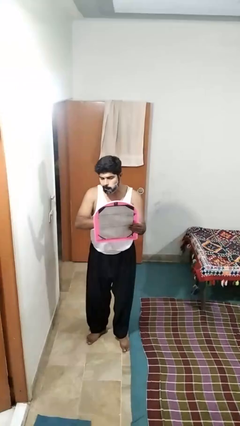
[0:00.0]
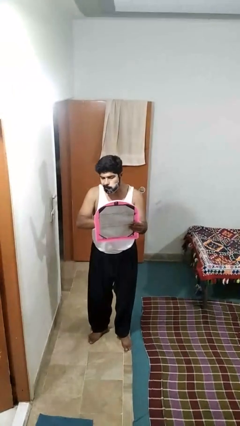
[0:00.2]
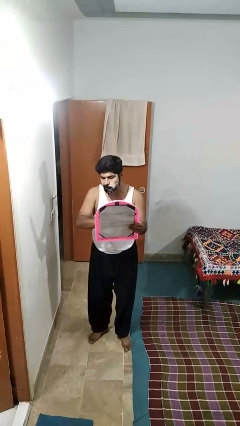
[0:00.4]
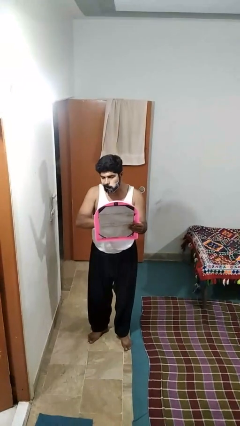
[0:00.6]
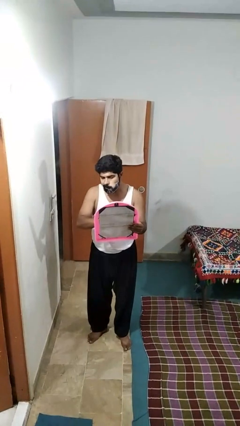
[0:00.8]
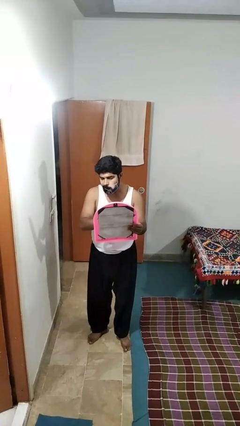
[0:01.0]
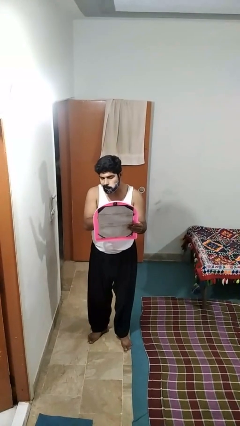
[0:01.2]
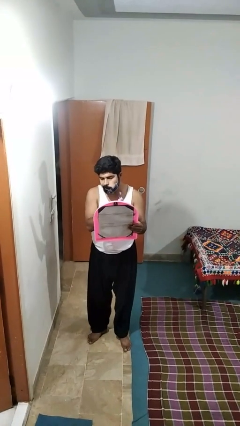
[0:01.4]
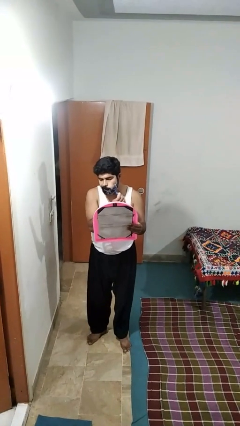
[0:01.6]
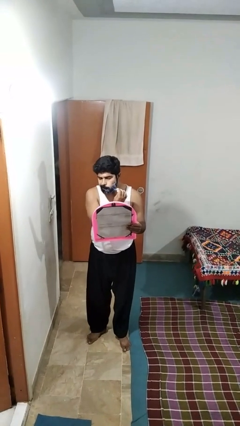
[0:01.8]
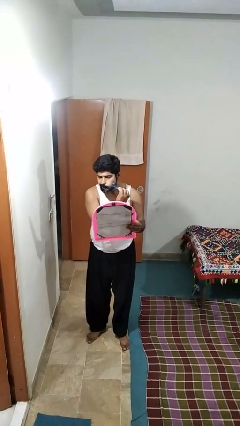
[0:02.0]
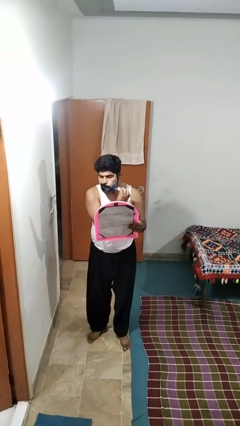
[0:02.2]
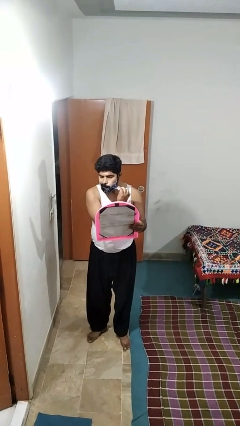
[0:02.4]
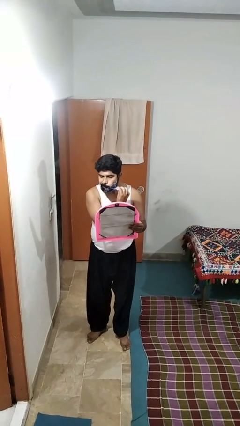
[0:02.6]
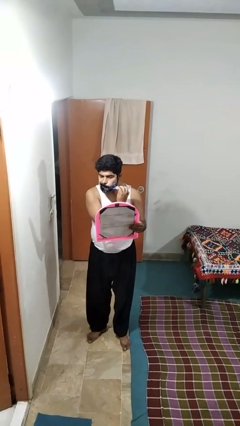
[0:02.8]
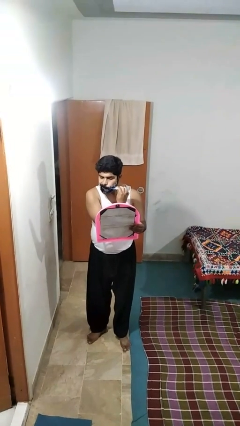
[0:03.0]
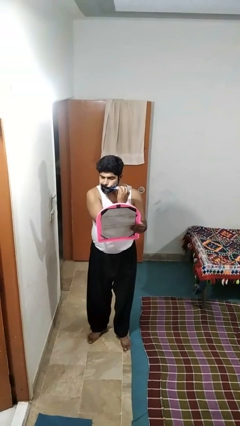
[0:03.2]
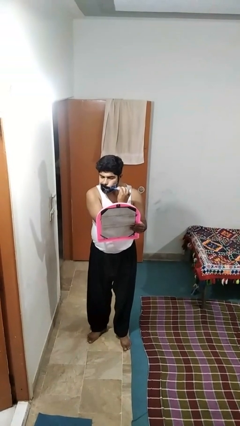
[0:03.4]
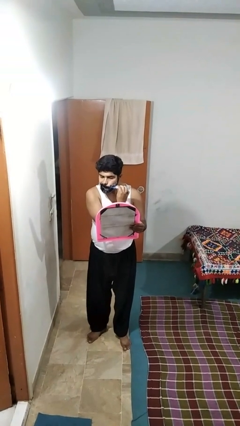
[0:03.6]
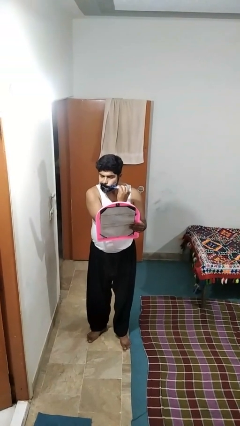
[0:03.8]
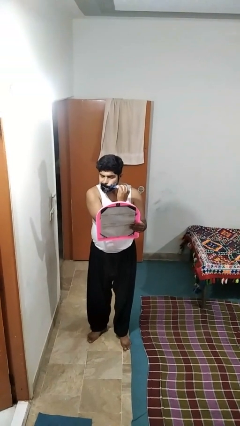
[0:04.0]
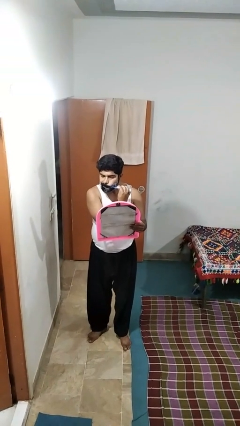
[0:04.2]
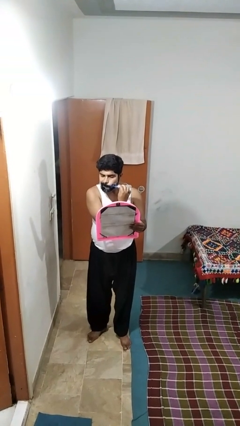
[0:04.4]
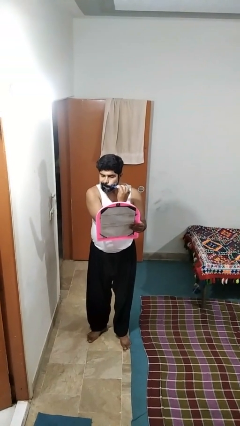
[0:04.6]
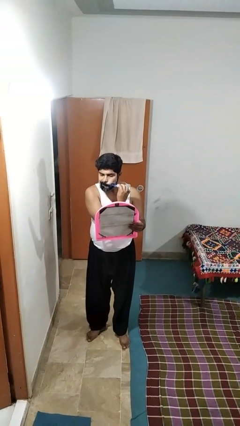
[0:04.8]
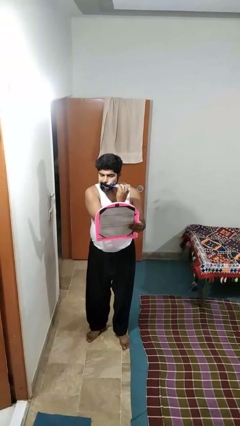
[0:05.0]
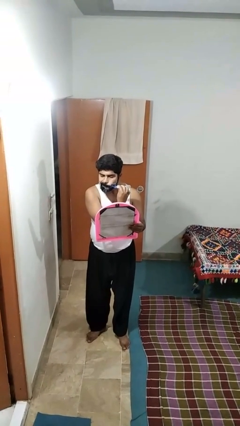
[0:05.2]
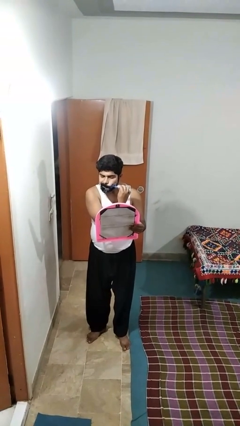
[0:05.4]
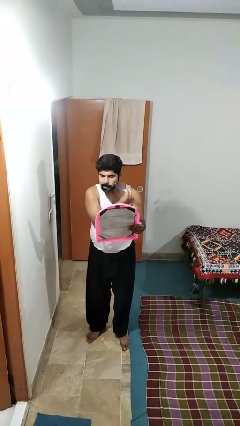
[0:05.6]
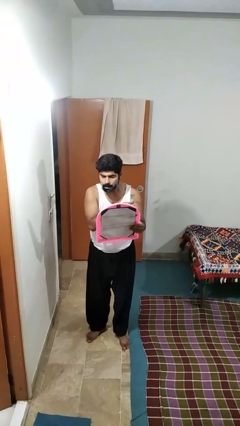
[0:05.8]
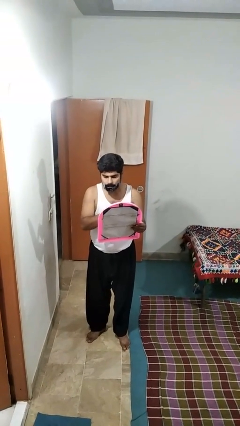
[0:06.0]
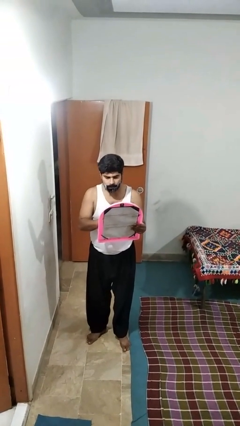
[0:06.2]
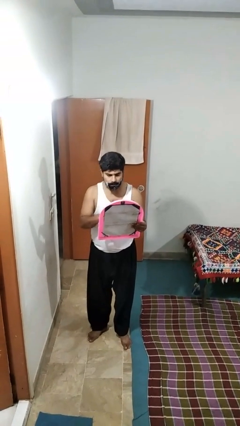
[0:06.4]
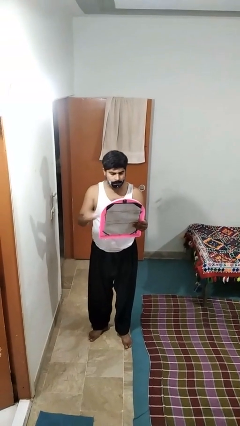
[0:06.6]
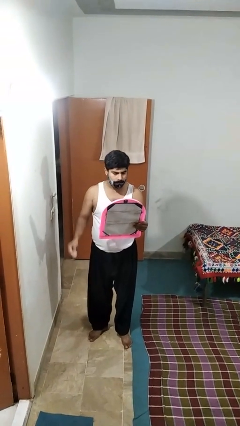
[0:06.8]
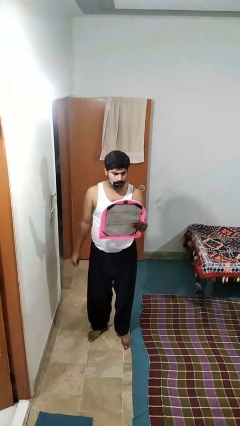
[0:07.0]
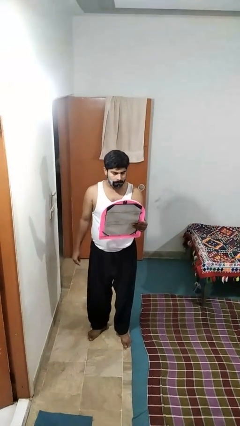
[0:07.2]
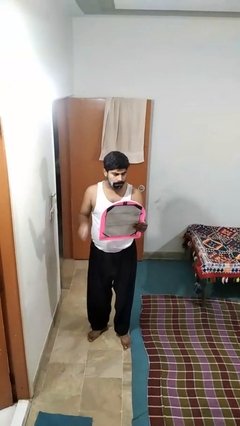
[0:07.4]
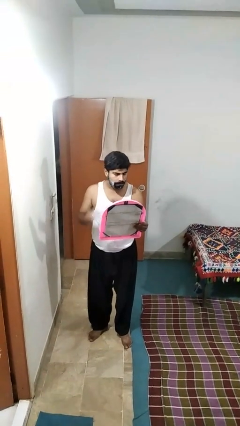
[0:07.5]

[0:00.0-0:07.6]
person shaves face

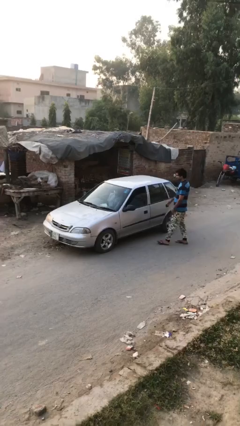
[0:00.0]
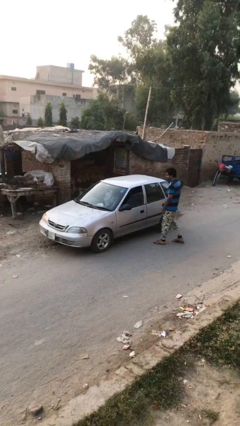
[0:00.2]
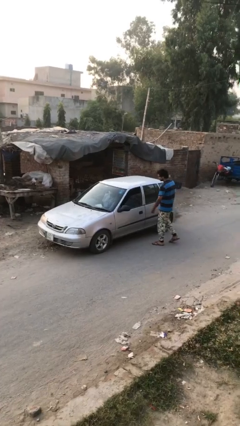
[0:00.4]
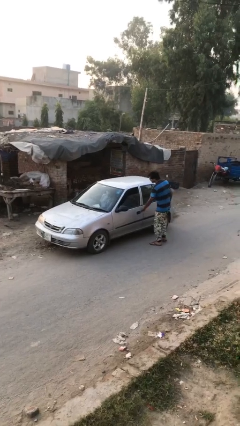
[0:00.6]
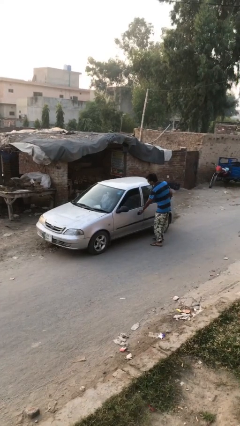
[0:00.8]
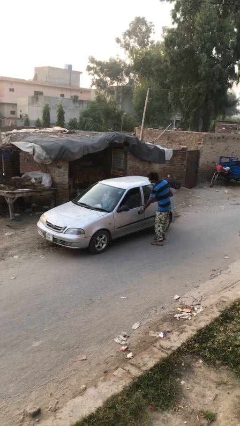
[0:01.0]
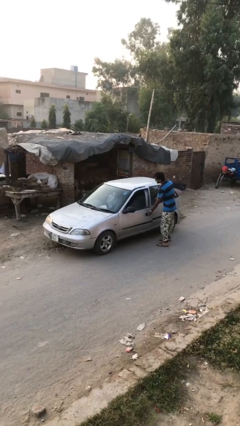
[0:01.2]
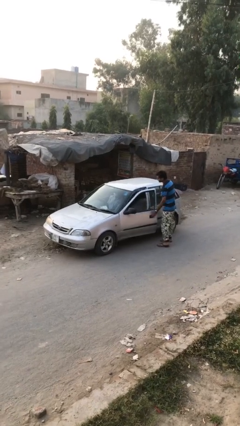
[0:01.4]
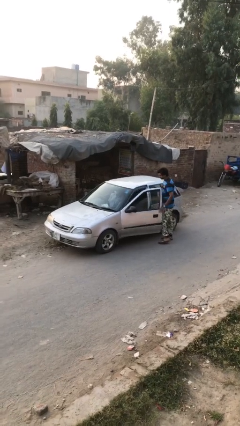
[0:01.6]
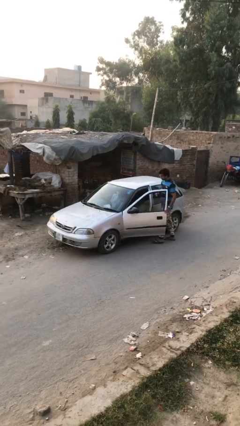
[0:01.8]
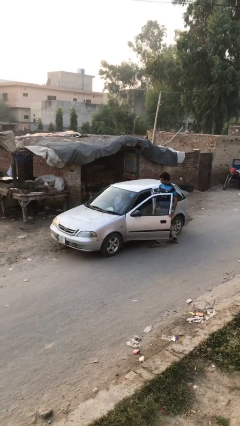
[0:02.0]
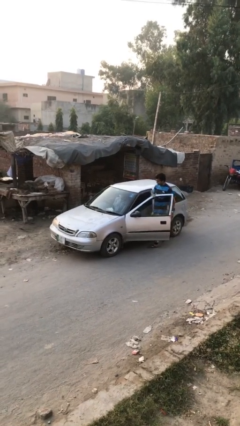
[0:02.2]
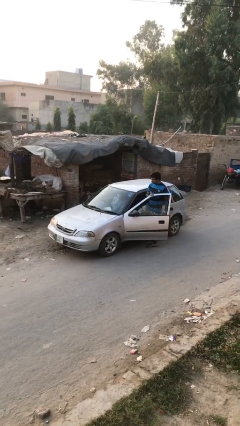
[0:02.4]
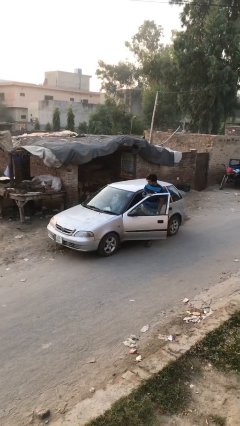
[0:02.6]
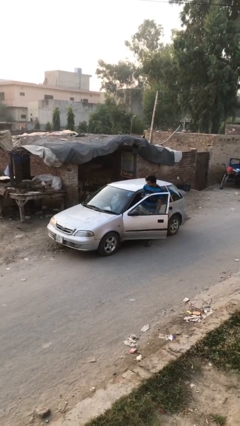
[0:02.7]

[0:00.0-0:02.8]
car picks up person

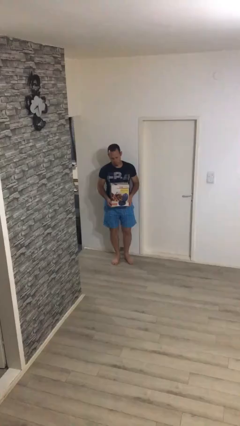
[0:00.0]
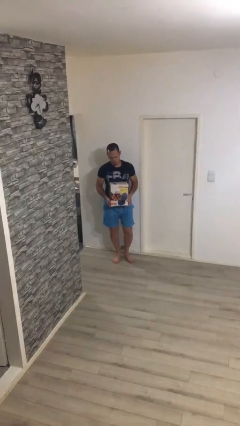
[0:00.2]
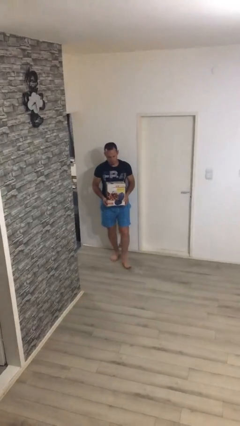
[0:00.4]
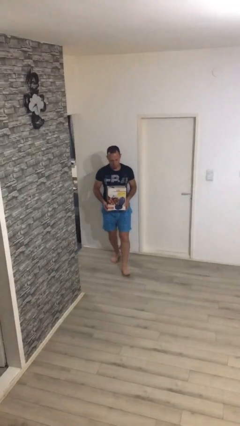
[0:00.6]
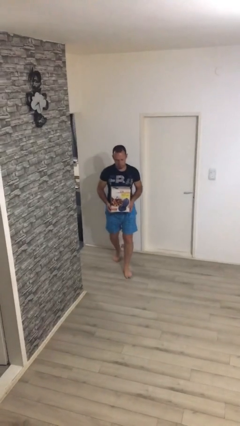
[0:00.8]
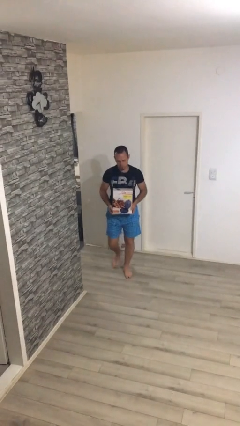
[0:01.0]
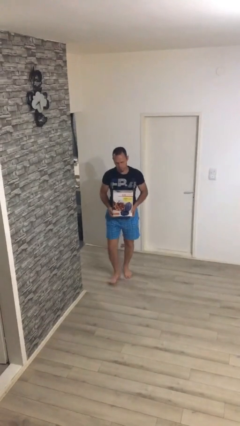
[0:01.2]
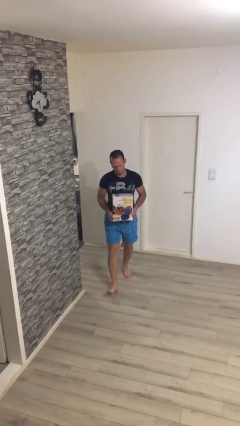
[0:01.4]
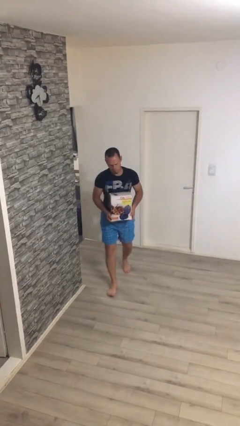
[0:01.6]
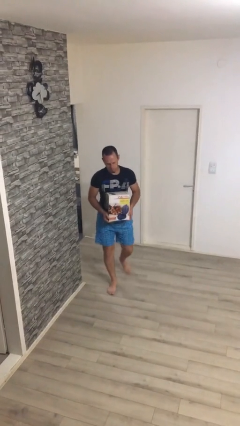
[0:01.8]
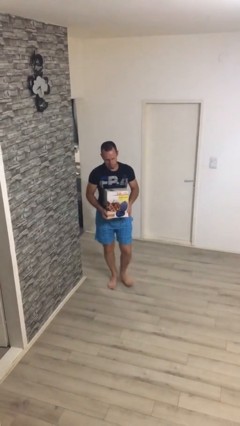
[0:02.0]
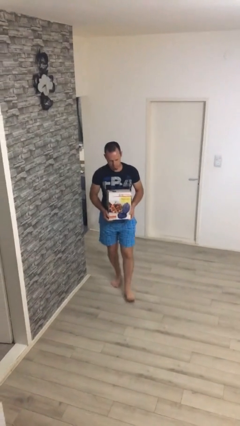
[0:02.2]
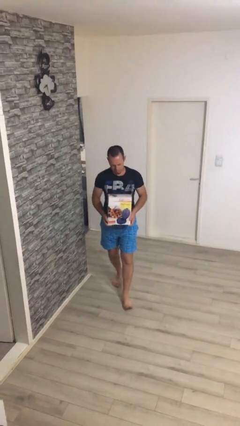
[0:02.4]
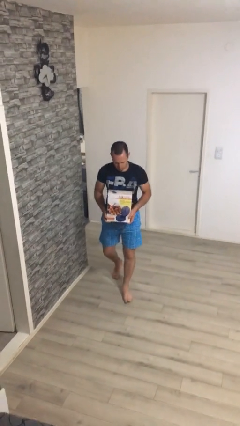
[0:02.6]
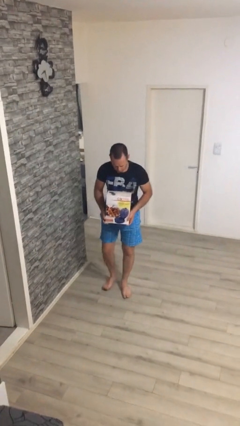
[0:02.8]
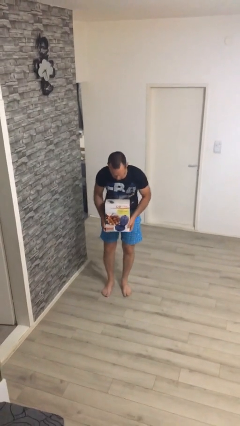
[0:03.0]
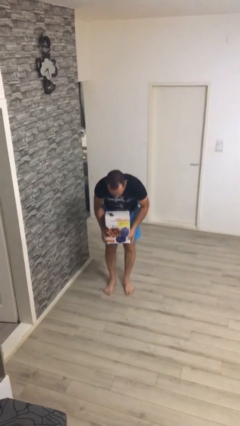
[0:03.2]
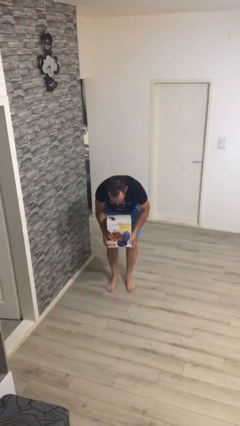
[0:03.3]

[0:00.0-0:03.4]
person carries heavy object

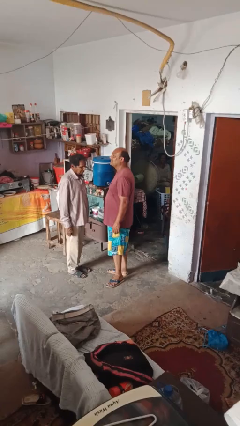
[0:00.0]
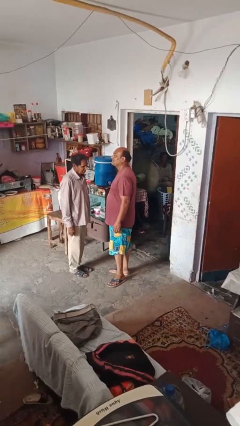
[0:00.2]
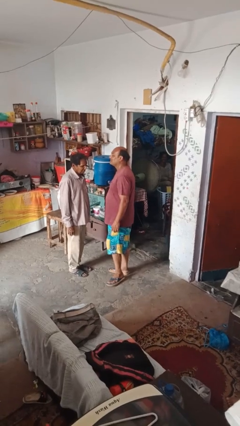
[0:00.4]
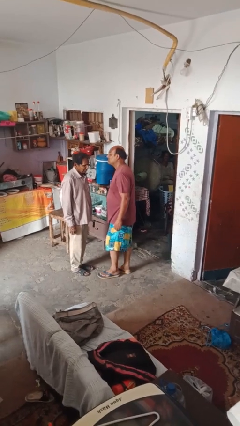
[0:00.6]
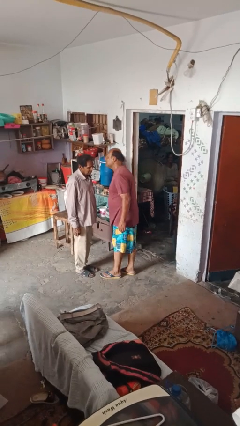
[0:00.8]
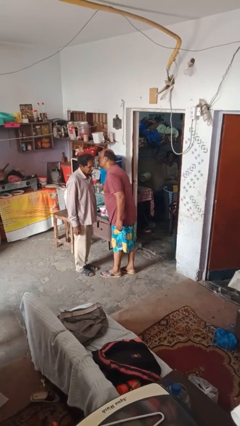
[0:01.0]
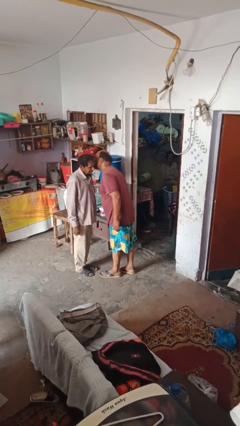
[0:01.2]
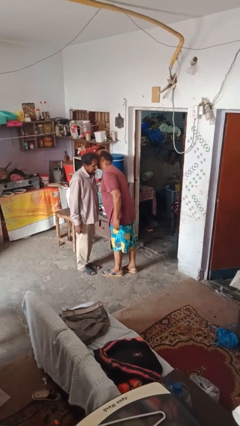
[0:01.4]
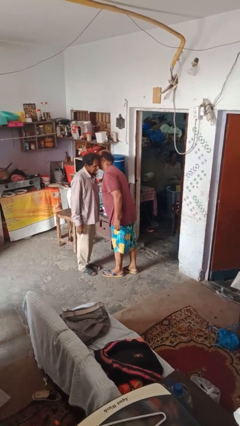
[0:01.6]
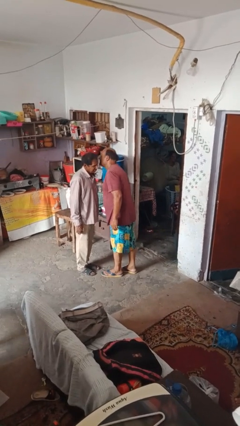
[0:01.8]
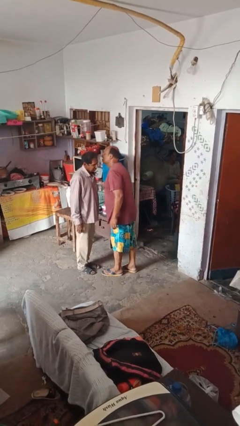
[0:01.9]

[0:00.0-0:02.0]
person kisses cheek of person

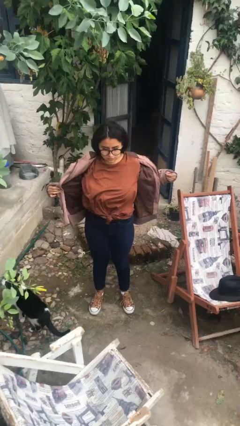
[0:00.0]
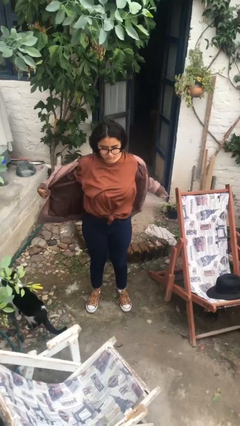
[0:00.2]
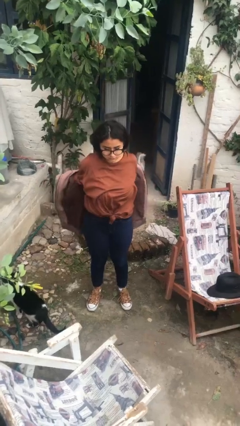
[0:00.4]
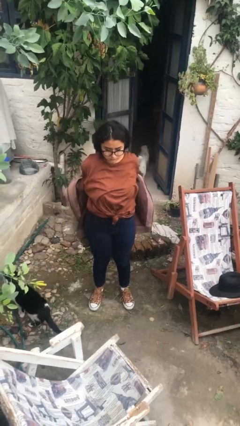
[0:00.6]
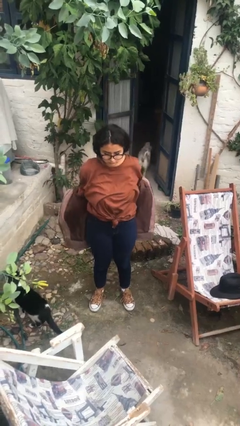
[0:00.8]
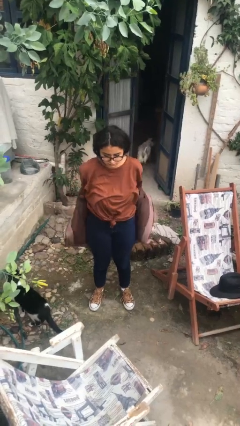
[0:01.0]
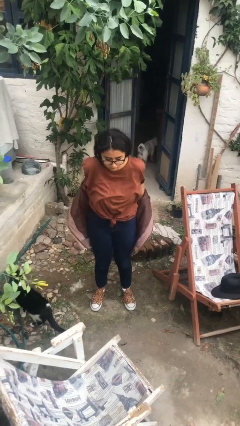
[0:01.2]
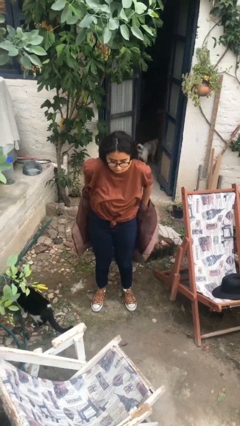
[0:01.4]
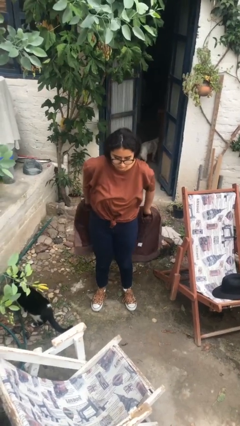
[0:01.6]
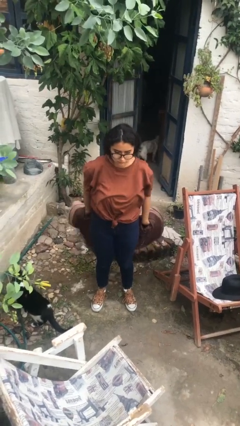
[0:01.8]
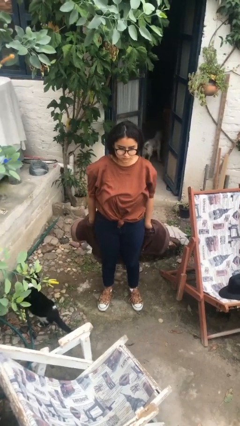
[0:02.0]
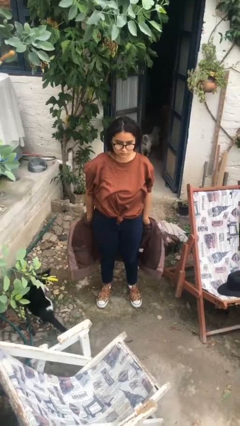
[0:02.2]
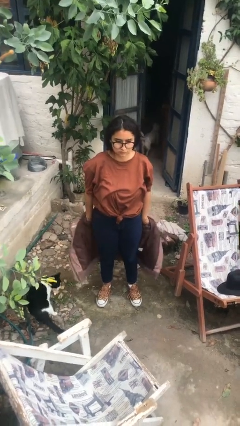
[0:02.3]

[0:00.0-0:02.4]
person takes off jacket
